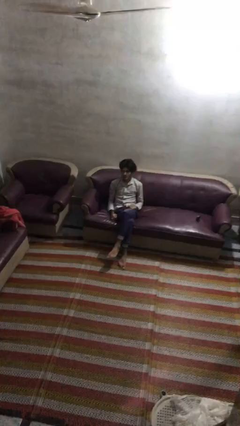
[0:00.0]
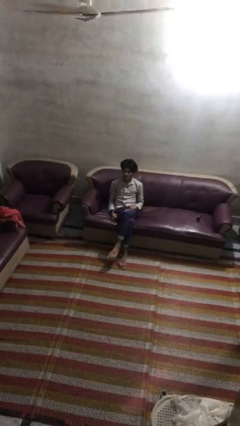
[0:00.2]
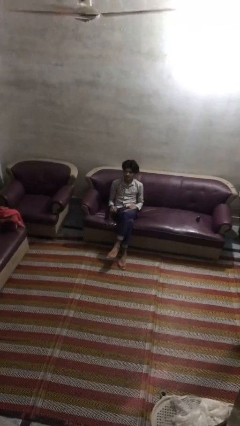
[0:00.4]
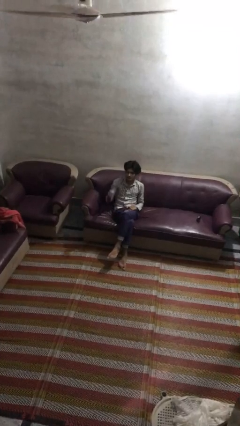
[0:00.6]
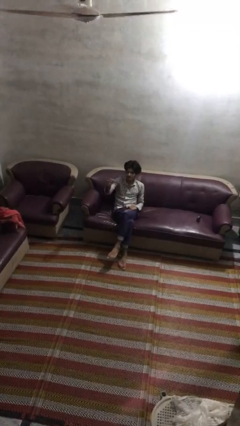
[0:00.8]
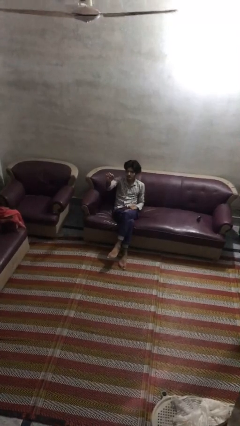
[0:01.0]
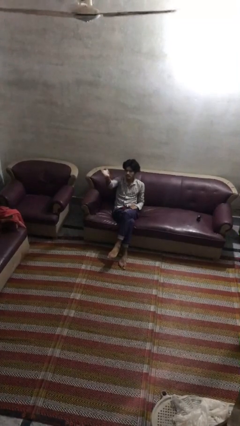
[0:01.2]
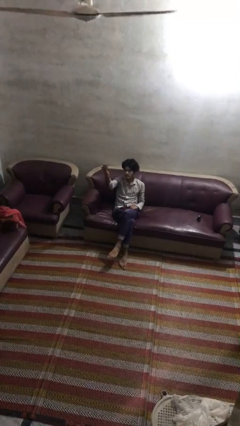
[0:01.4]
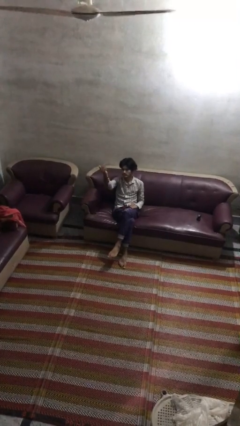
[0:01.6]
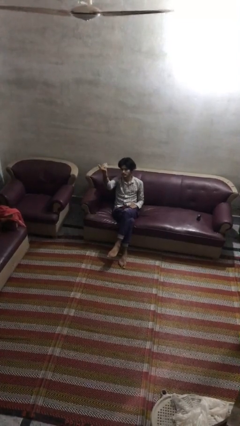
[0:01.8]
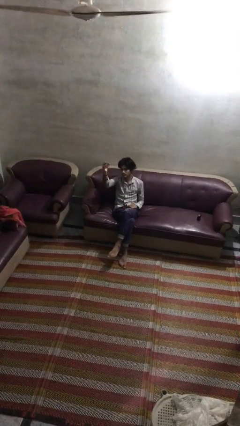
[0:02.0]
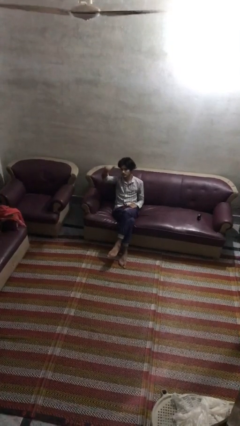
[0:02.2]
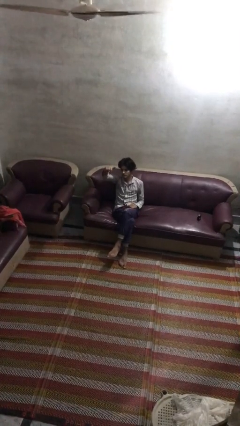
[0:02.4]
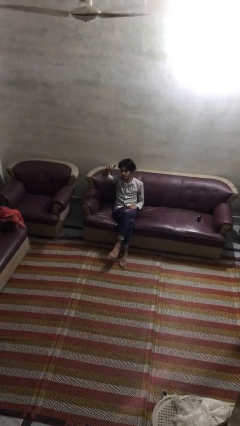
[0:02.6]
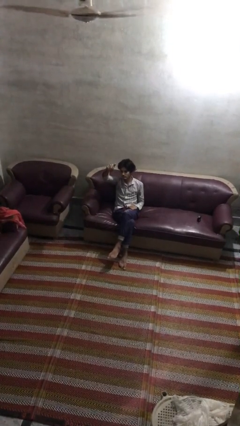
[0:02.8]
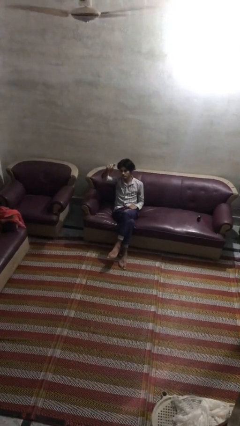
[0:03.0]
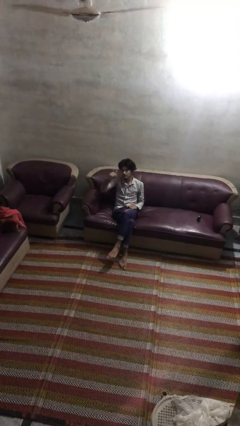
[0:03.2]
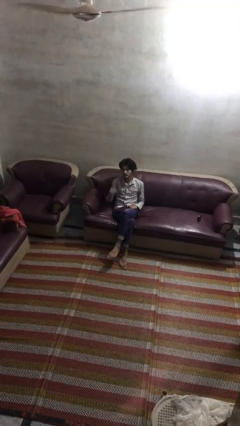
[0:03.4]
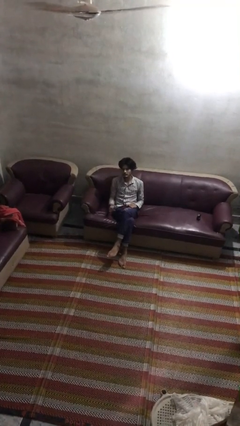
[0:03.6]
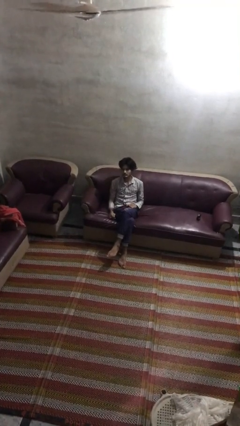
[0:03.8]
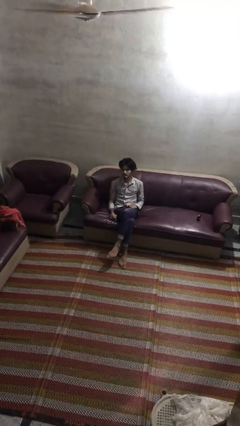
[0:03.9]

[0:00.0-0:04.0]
person gestures come here

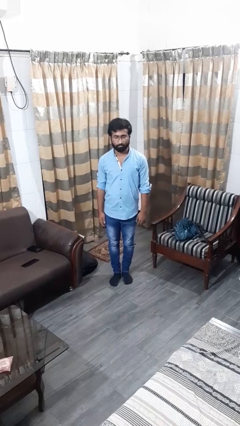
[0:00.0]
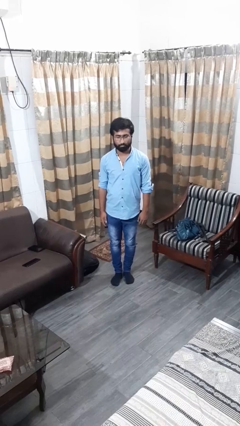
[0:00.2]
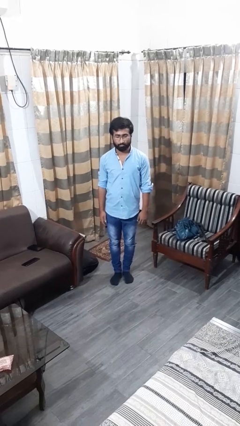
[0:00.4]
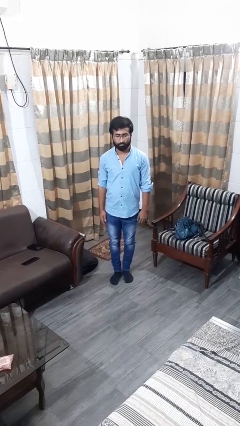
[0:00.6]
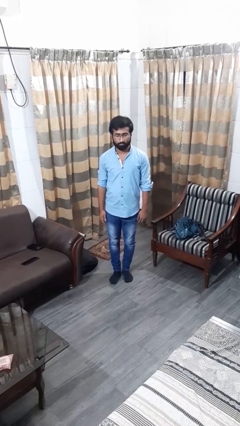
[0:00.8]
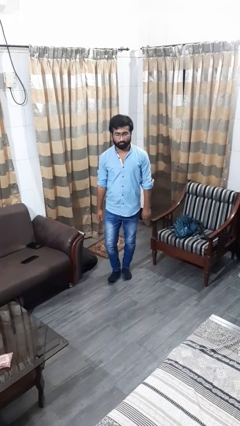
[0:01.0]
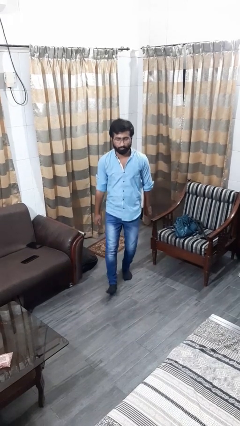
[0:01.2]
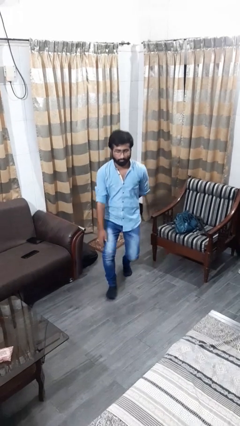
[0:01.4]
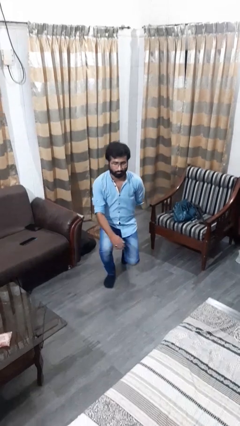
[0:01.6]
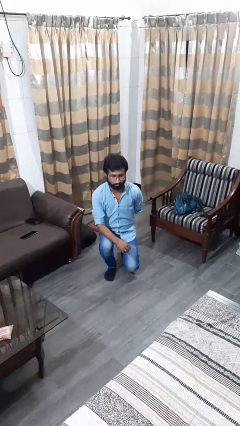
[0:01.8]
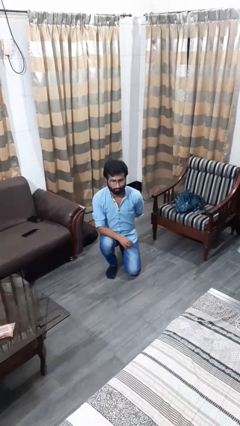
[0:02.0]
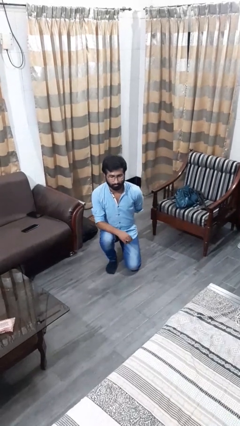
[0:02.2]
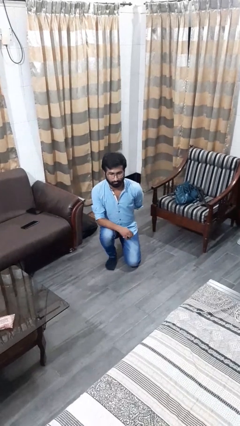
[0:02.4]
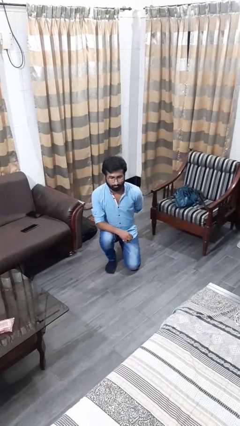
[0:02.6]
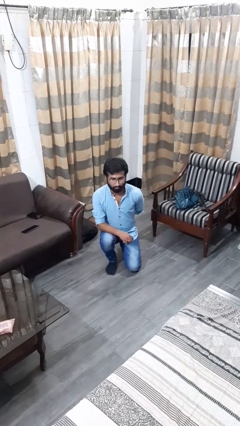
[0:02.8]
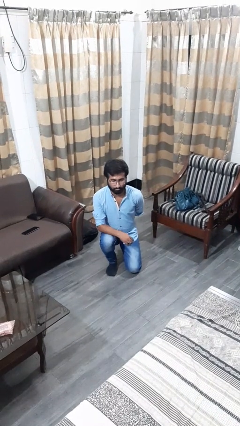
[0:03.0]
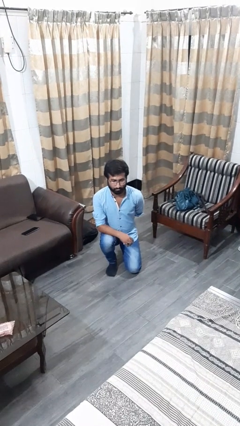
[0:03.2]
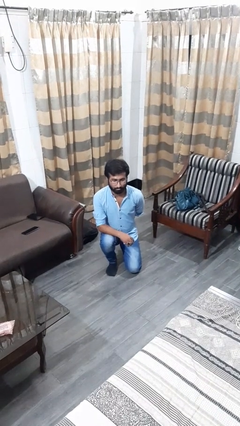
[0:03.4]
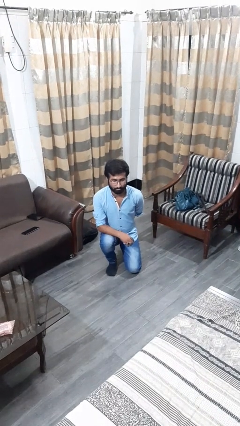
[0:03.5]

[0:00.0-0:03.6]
person kneels

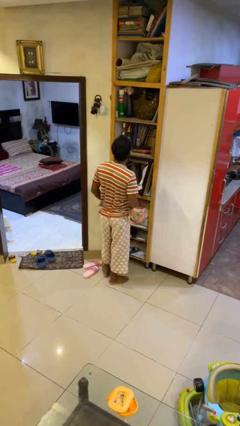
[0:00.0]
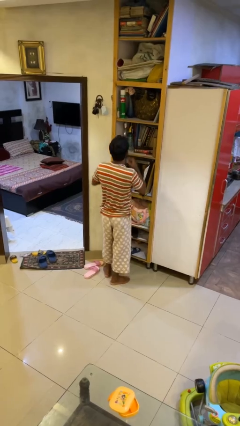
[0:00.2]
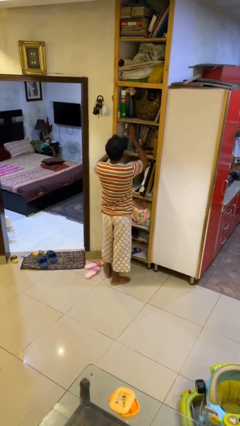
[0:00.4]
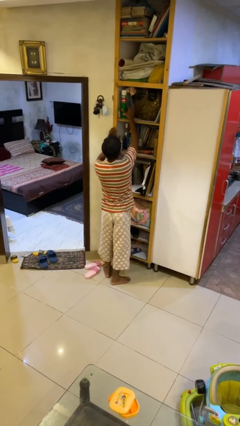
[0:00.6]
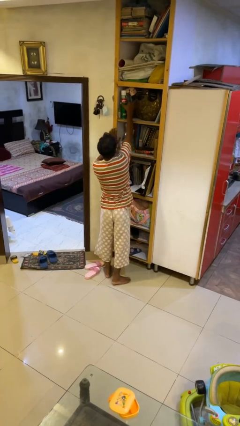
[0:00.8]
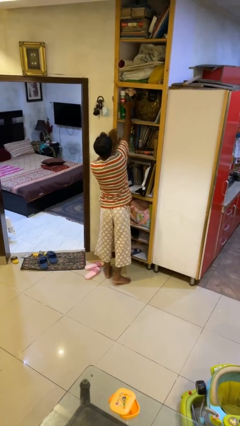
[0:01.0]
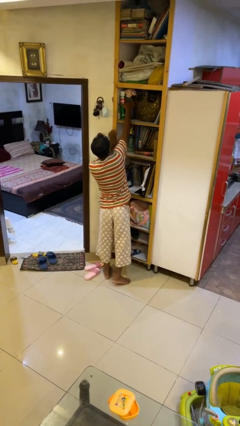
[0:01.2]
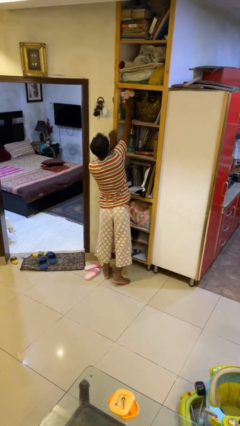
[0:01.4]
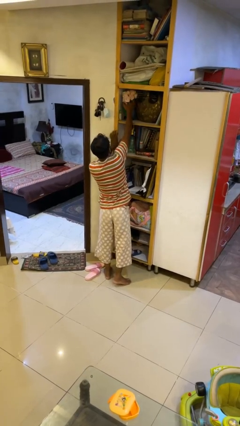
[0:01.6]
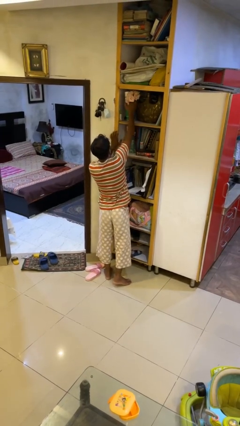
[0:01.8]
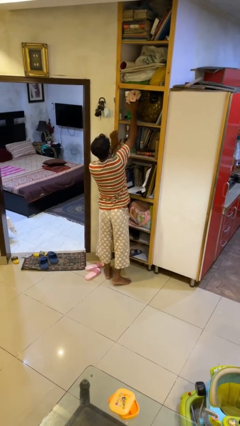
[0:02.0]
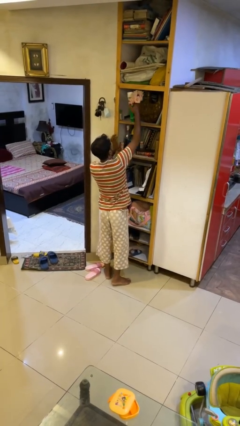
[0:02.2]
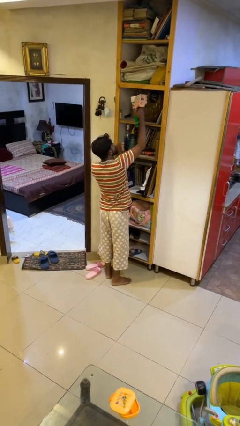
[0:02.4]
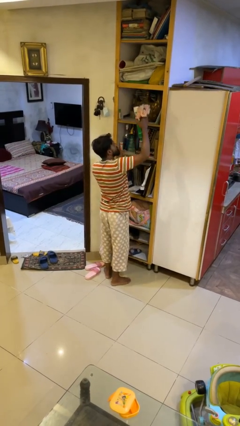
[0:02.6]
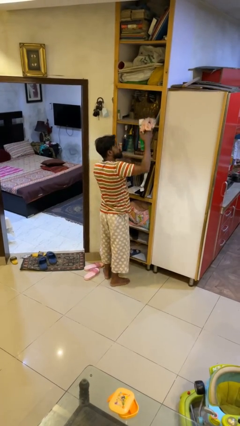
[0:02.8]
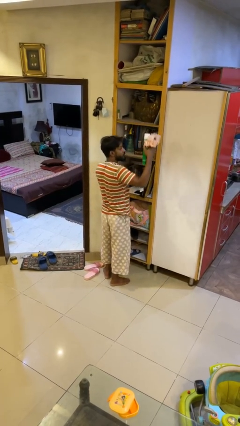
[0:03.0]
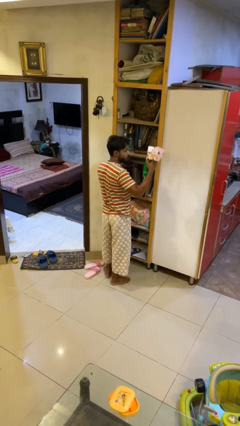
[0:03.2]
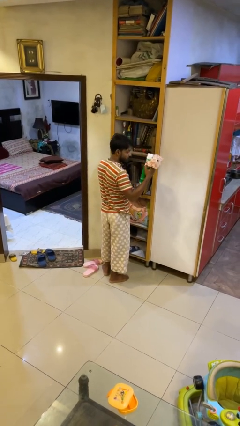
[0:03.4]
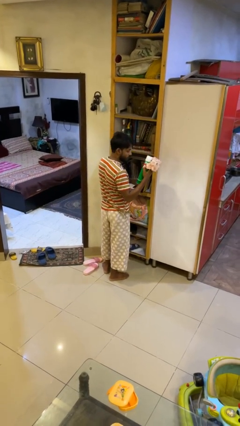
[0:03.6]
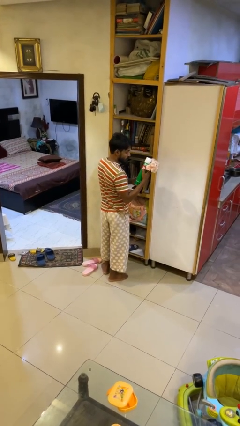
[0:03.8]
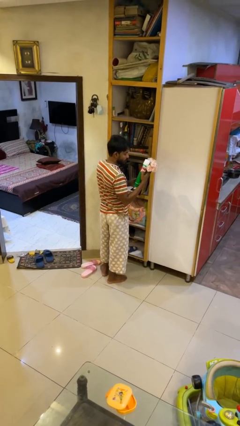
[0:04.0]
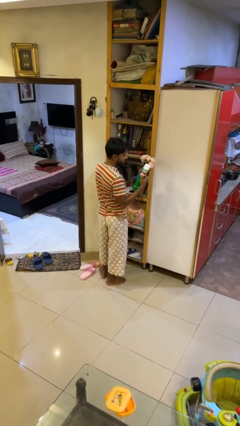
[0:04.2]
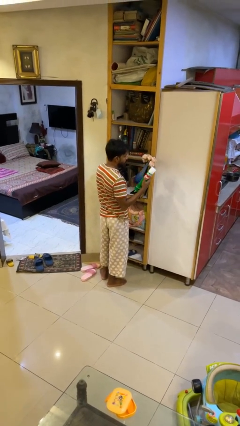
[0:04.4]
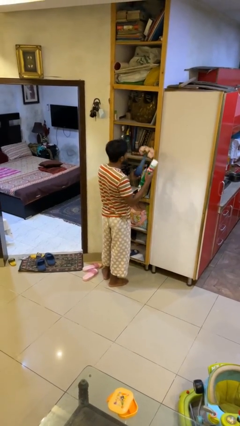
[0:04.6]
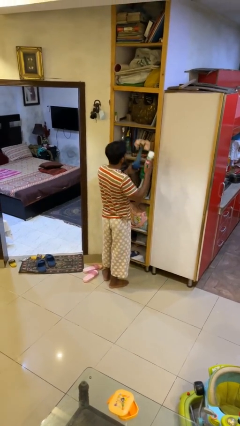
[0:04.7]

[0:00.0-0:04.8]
person picks up object from shelf

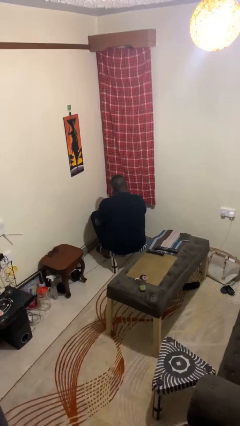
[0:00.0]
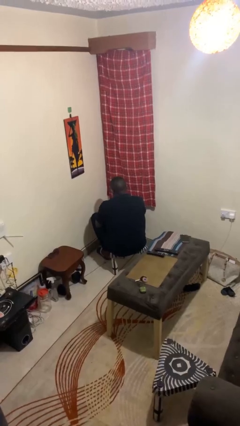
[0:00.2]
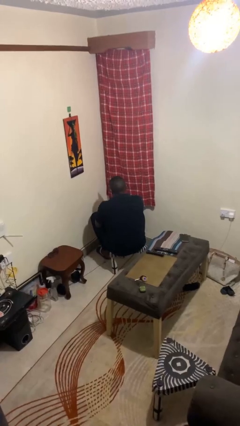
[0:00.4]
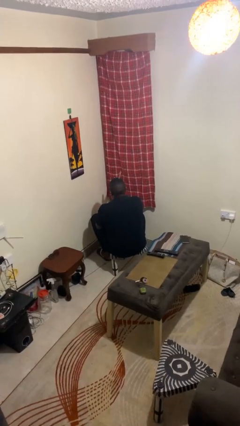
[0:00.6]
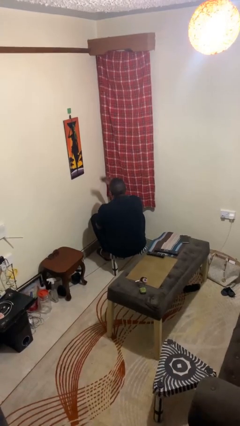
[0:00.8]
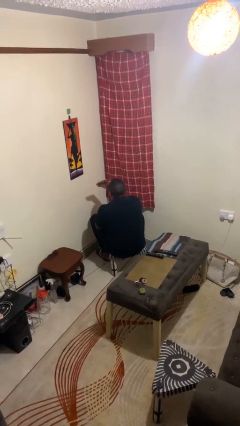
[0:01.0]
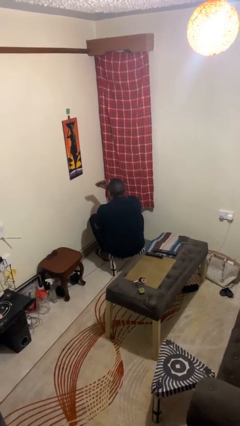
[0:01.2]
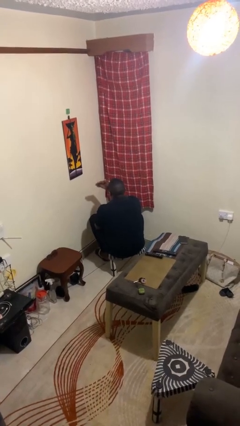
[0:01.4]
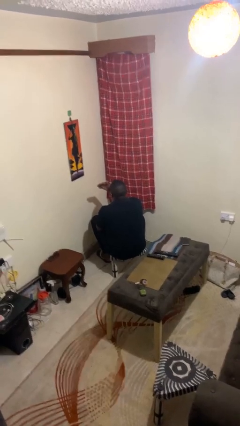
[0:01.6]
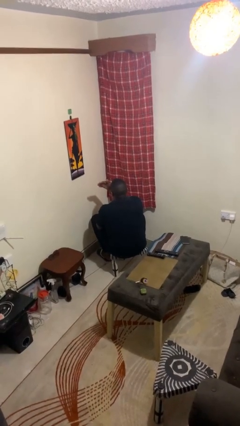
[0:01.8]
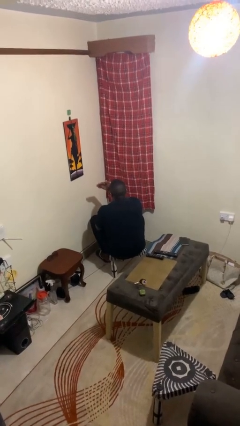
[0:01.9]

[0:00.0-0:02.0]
person gestures swipe left

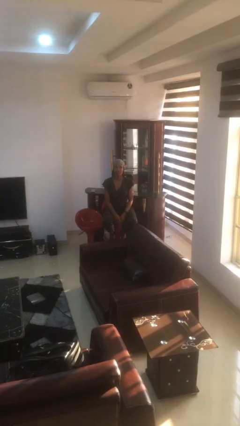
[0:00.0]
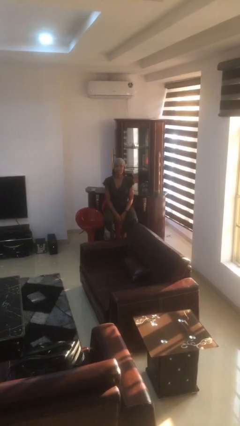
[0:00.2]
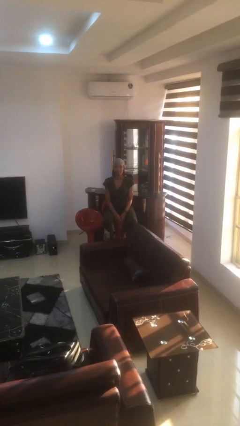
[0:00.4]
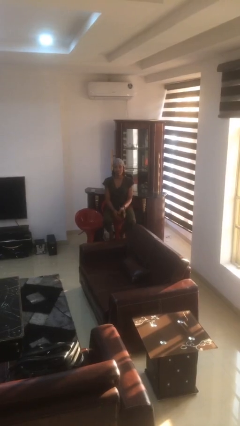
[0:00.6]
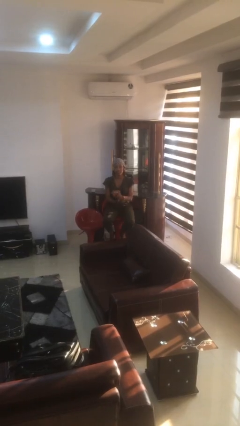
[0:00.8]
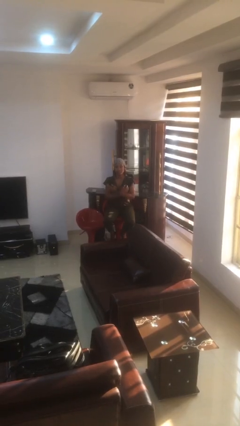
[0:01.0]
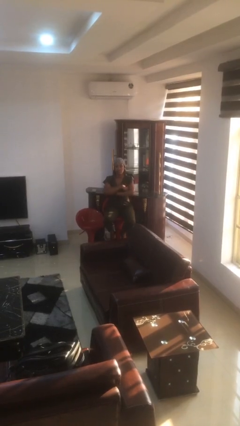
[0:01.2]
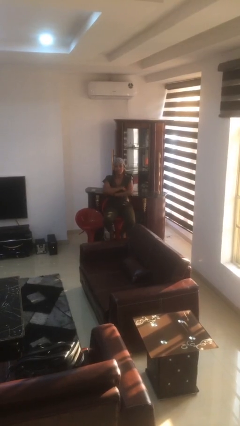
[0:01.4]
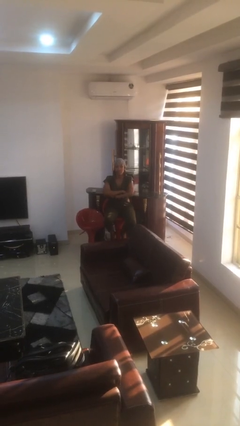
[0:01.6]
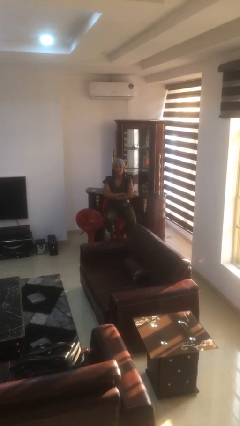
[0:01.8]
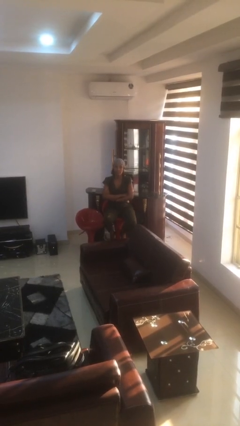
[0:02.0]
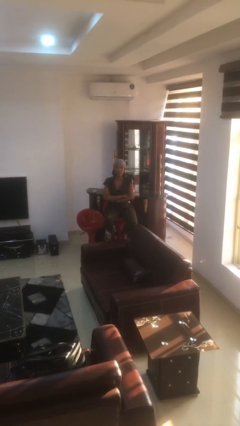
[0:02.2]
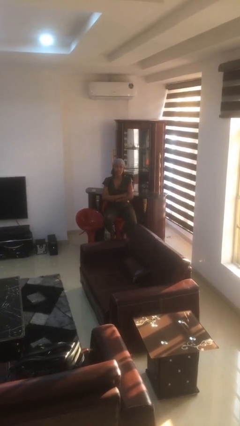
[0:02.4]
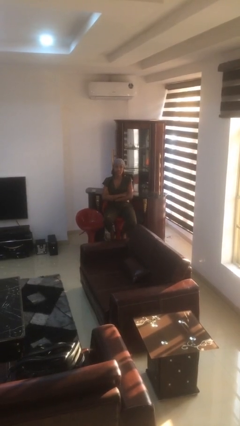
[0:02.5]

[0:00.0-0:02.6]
person crosses arms

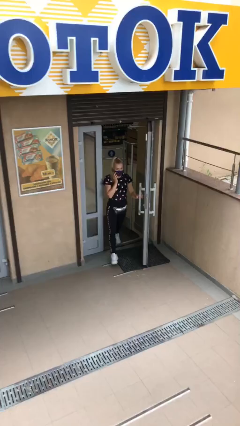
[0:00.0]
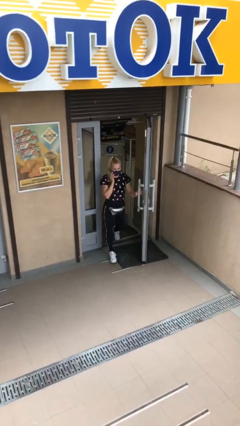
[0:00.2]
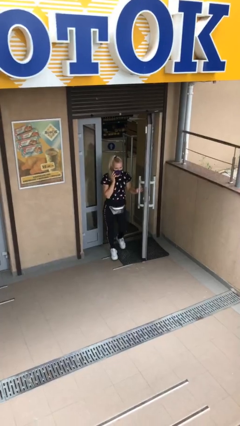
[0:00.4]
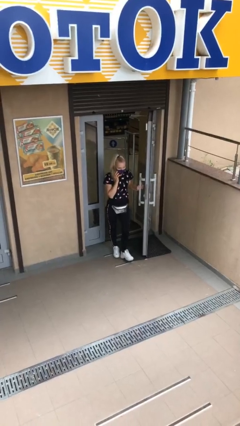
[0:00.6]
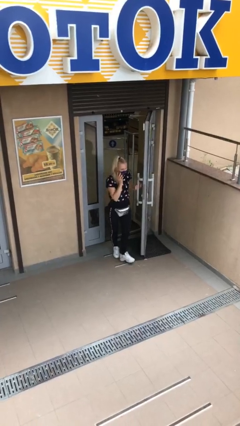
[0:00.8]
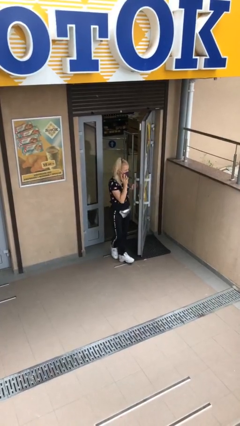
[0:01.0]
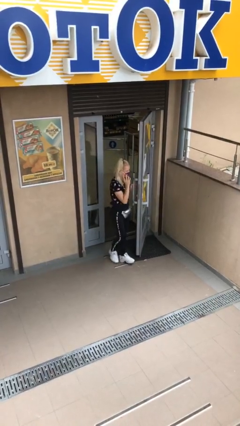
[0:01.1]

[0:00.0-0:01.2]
person enters scene through structure
